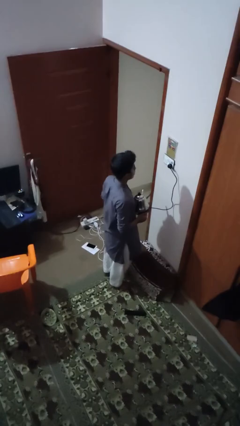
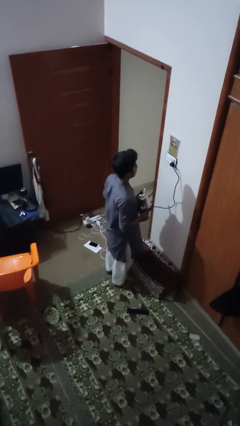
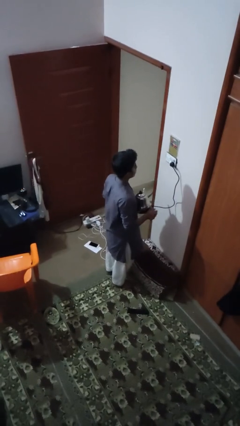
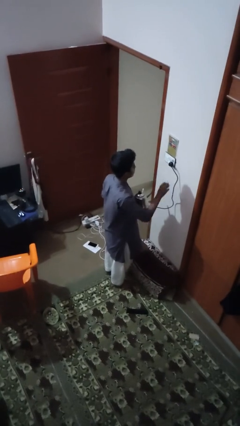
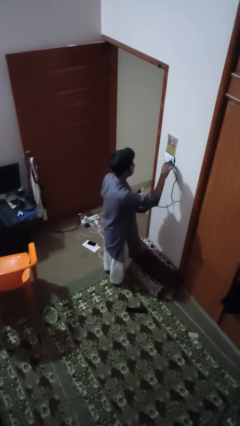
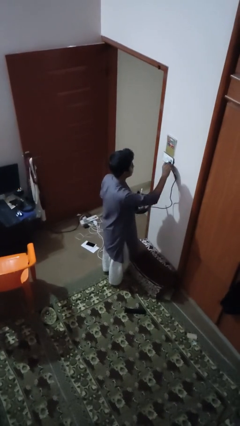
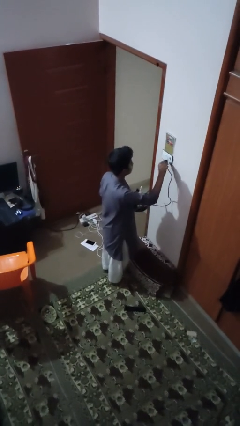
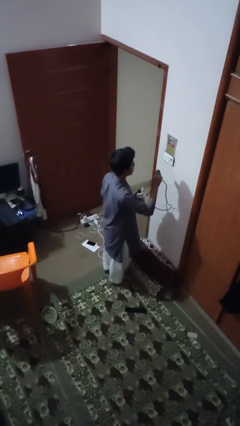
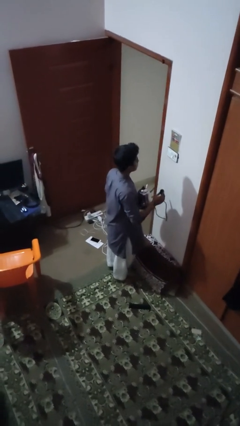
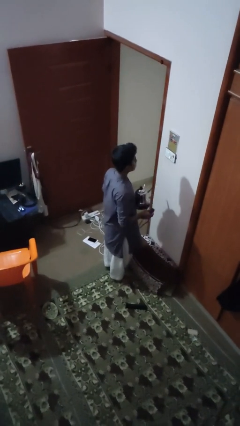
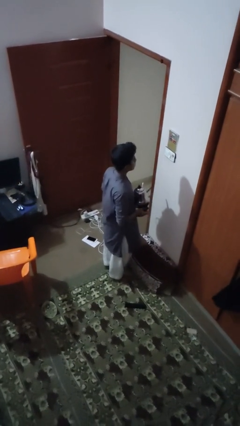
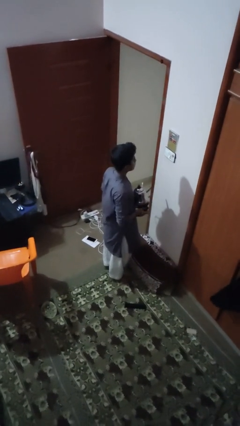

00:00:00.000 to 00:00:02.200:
person unplugs from electrical socket

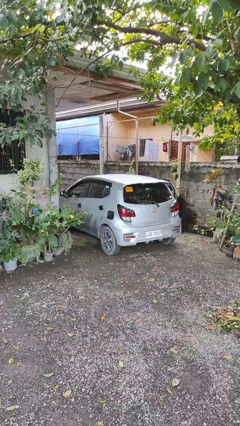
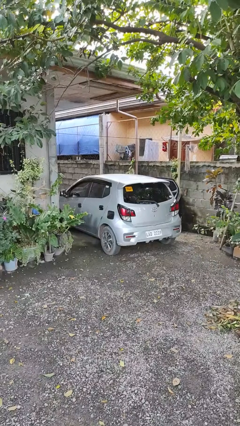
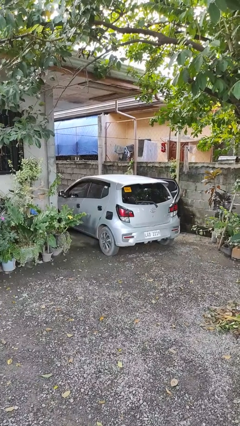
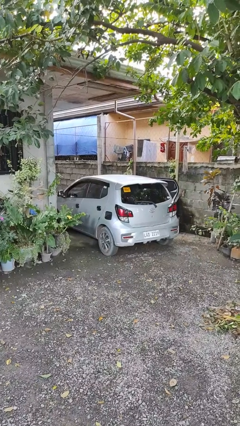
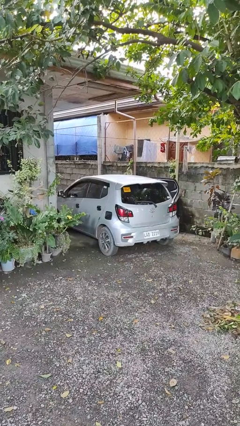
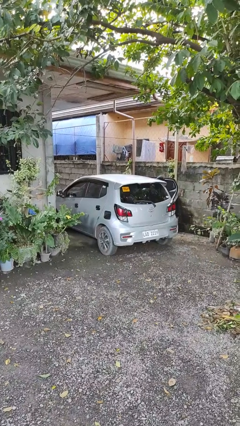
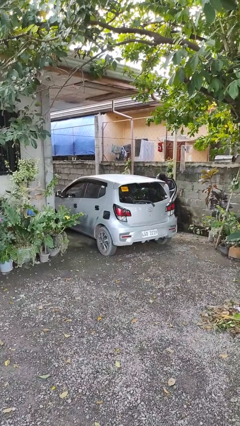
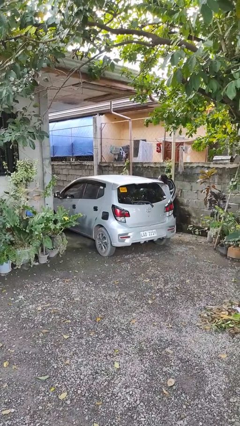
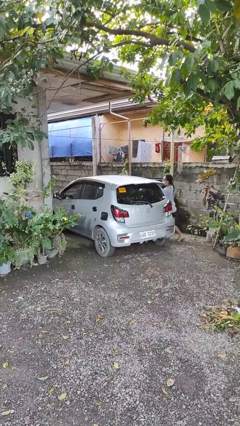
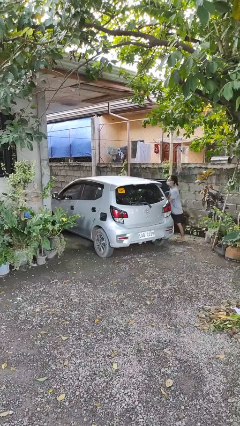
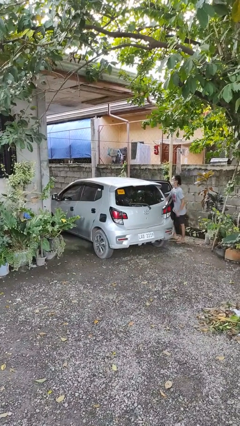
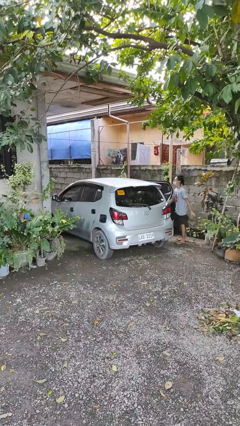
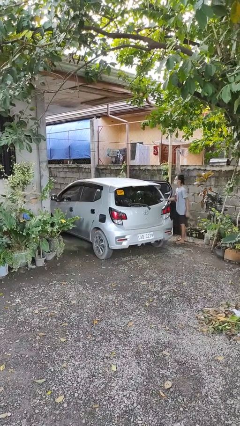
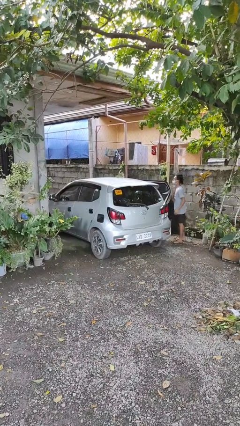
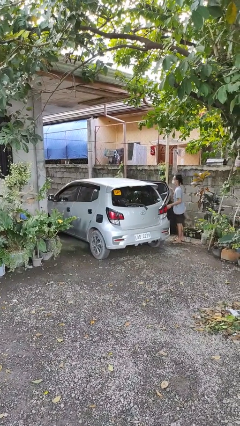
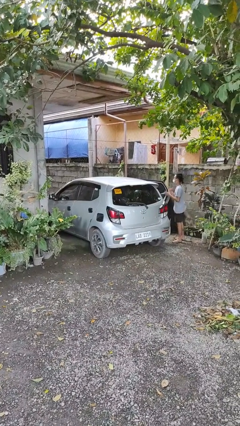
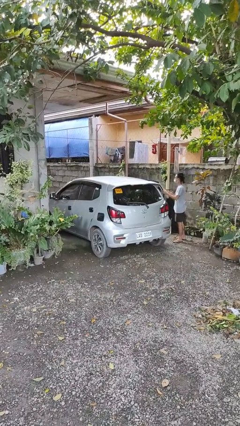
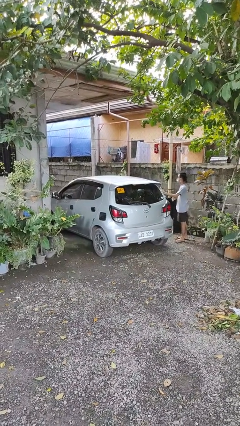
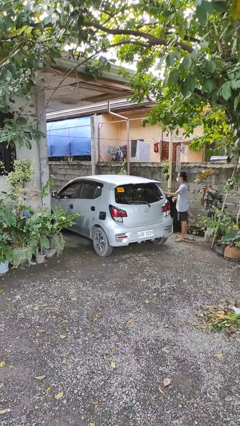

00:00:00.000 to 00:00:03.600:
car drops off person

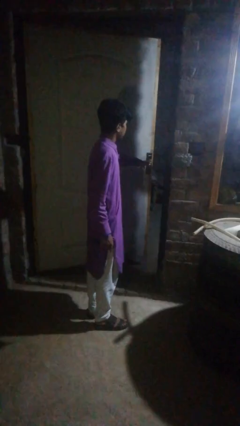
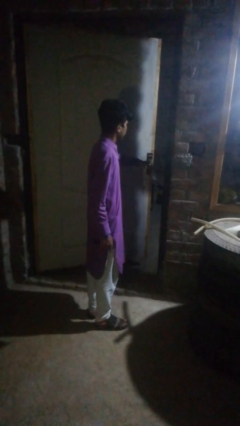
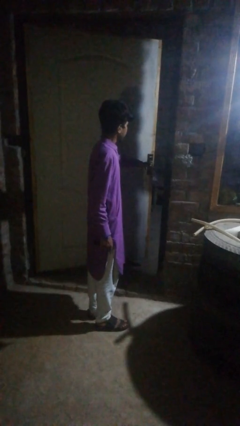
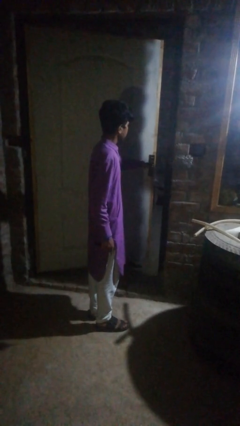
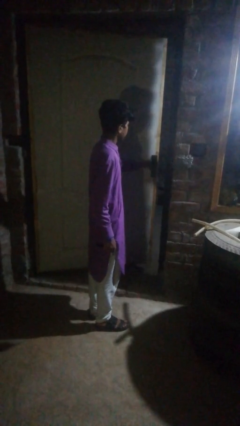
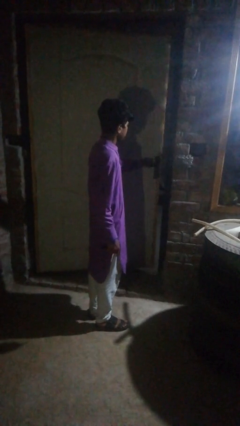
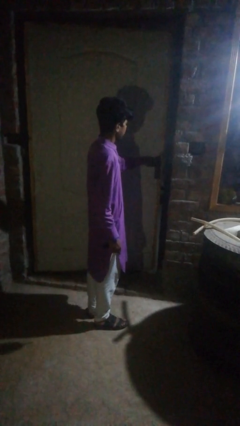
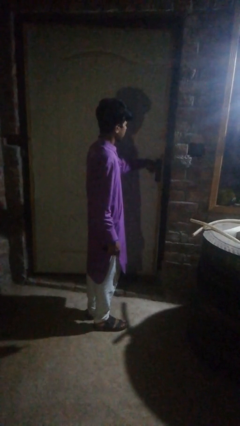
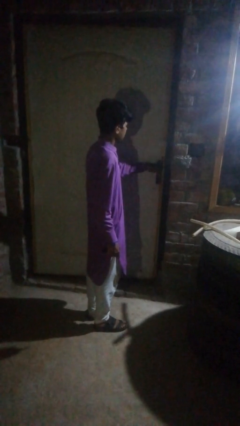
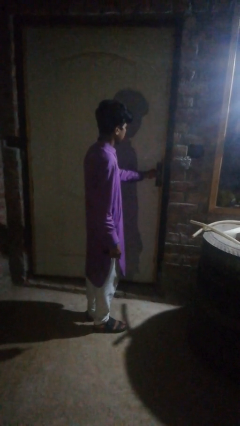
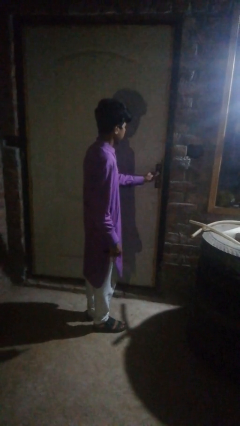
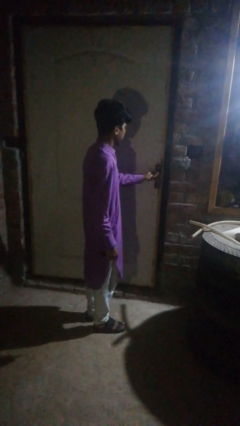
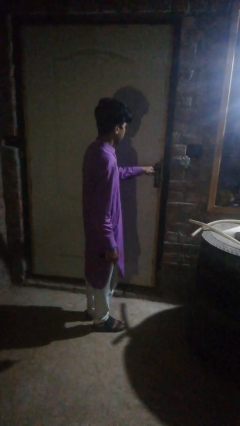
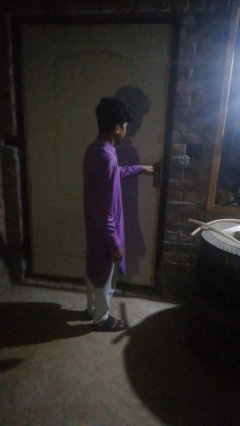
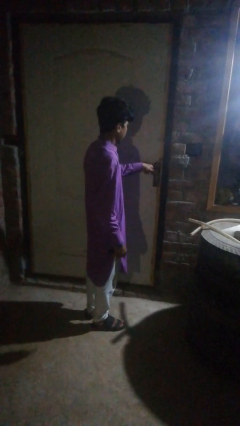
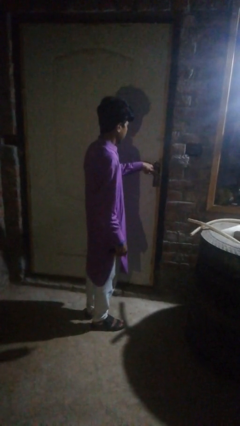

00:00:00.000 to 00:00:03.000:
person closes facility door

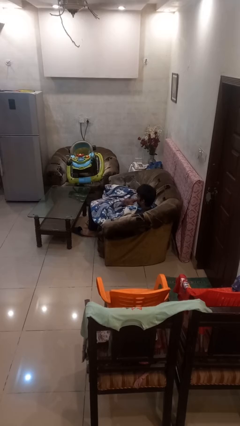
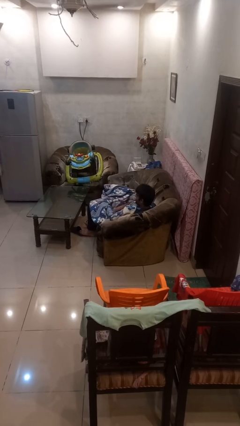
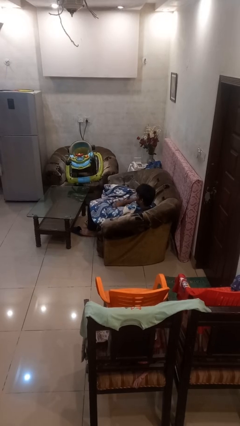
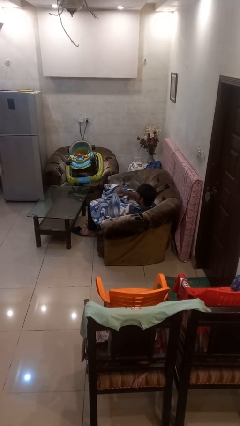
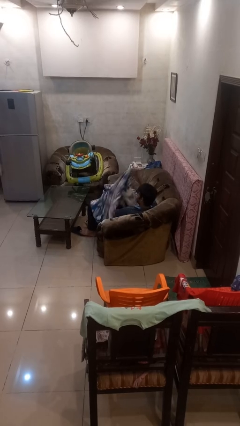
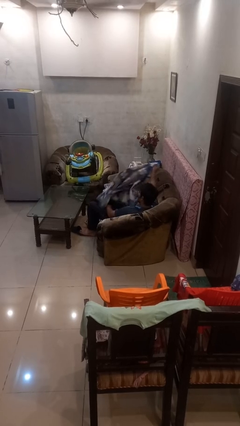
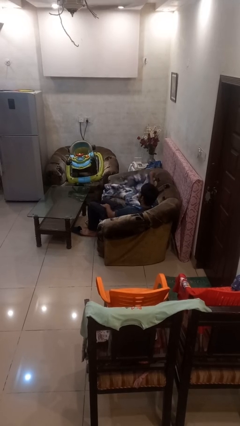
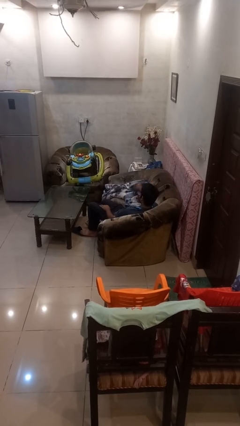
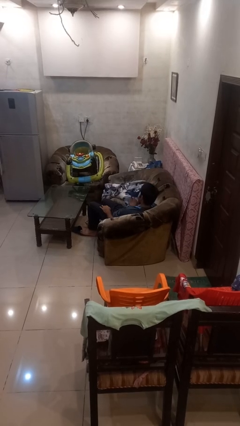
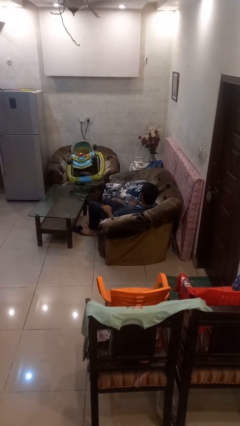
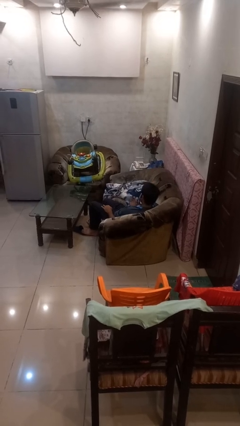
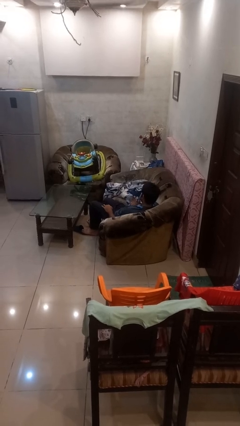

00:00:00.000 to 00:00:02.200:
person uncovers with blanket

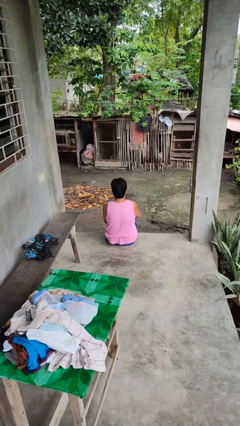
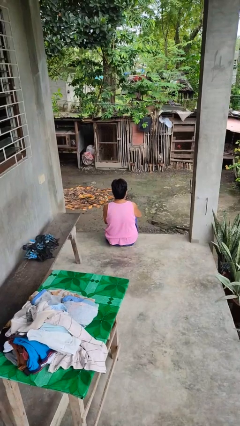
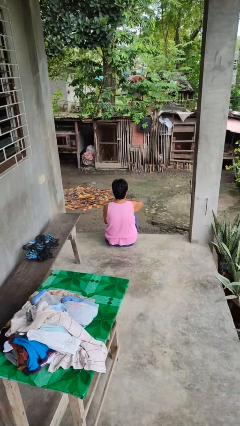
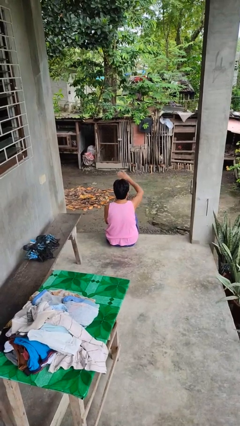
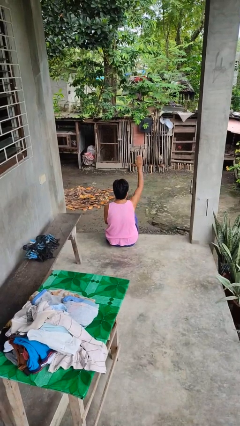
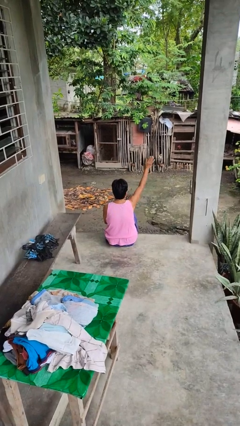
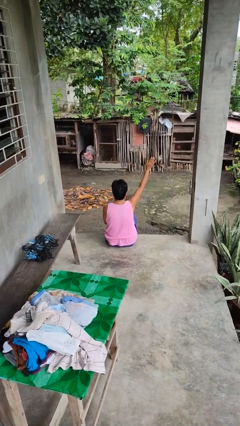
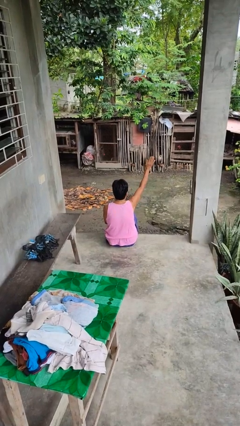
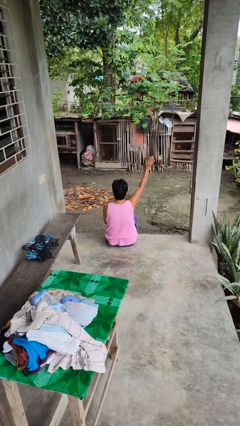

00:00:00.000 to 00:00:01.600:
person gestures swipe up

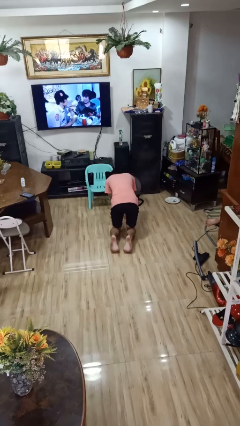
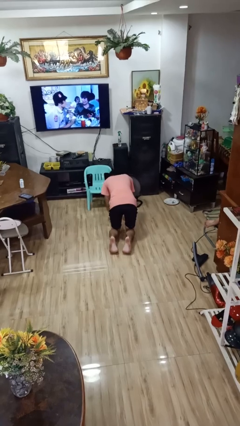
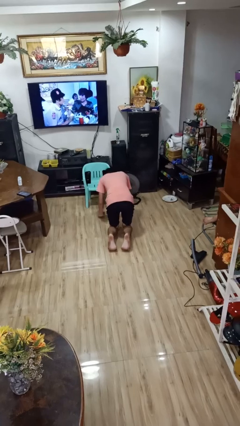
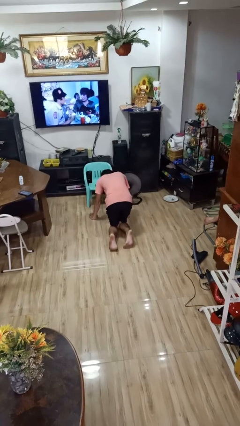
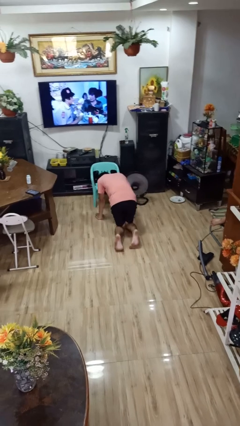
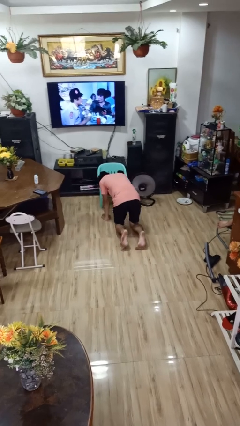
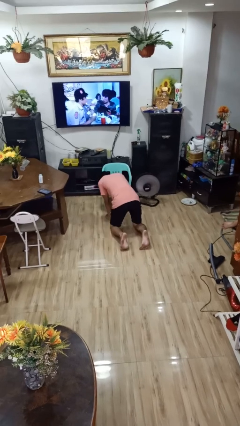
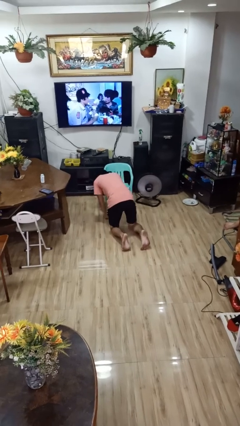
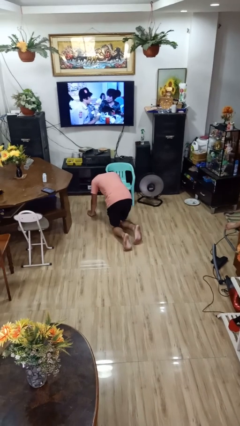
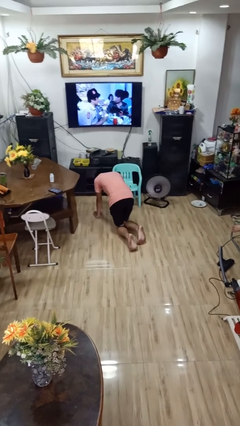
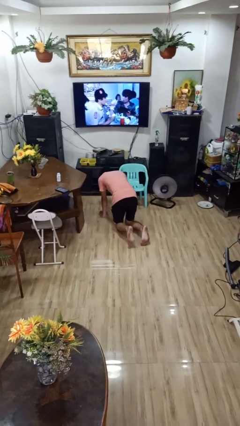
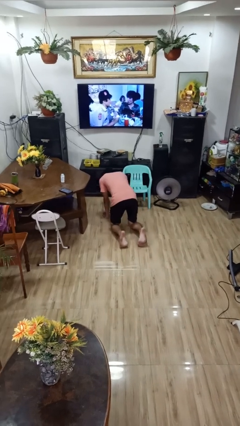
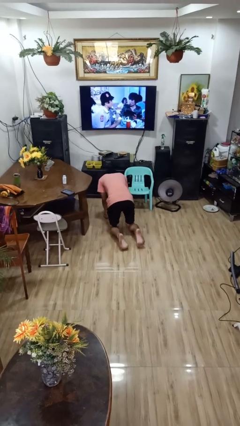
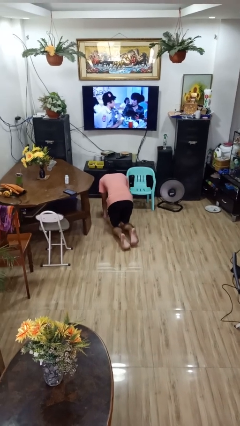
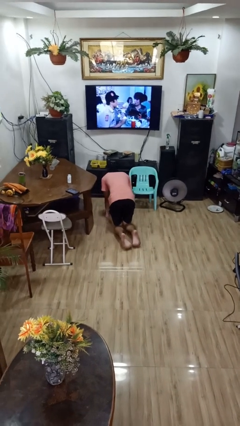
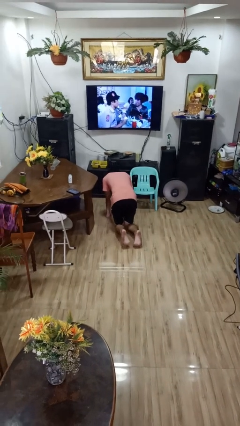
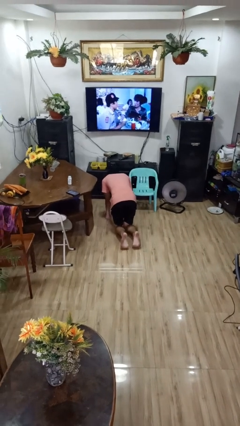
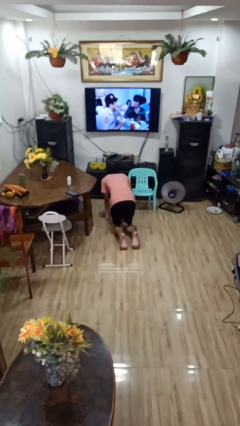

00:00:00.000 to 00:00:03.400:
person crawls

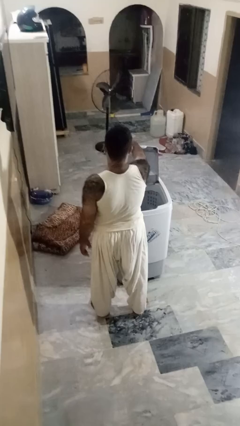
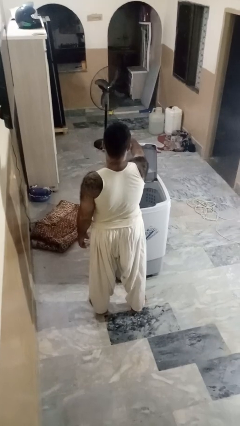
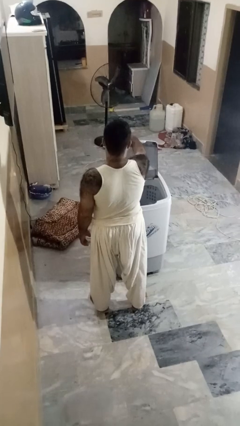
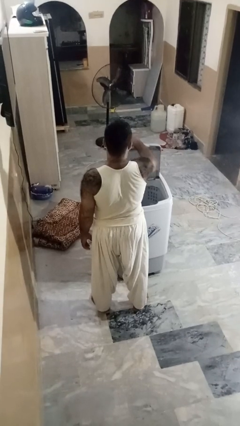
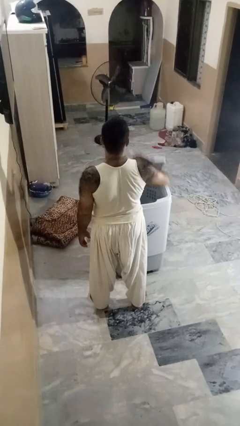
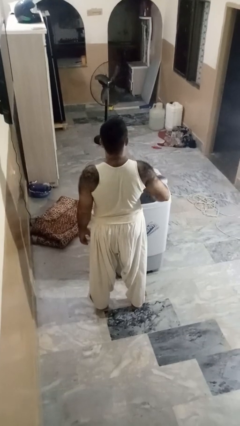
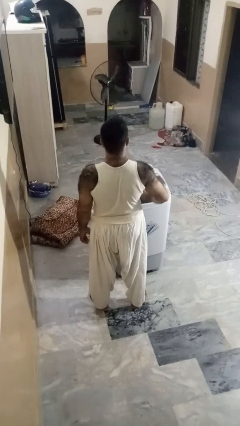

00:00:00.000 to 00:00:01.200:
person closes clothes washer
